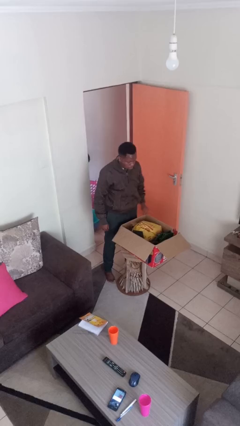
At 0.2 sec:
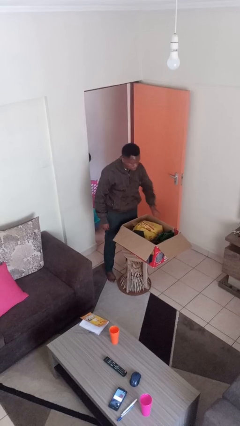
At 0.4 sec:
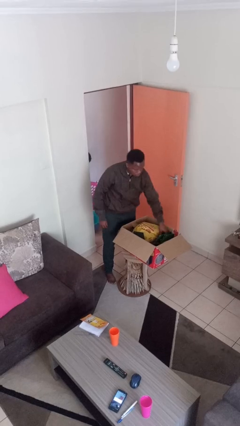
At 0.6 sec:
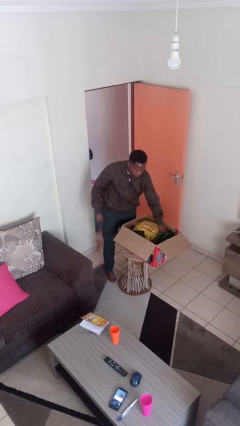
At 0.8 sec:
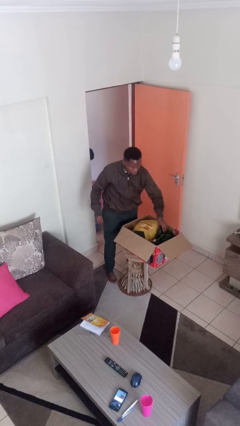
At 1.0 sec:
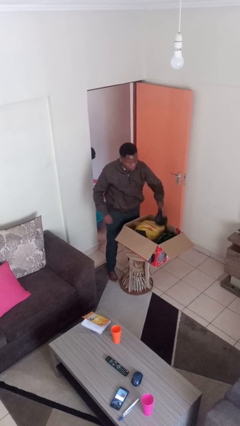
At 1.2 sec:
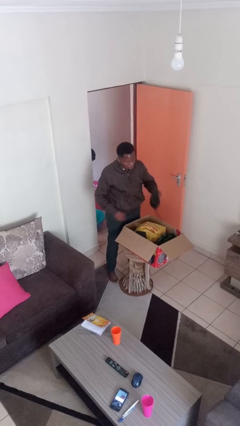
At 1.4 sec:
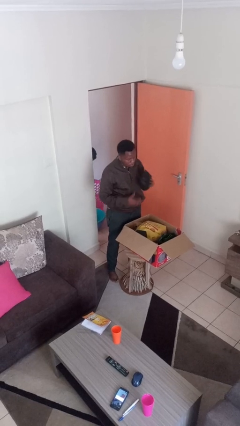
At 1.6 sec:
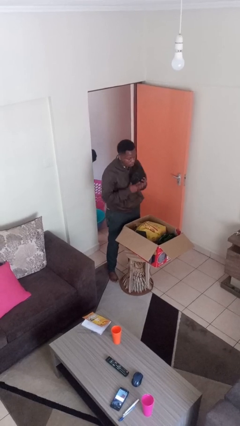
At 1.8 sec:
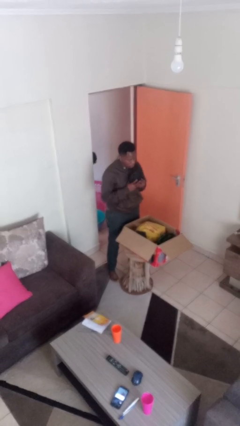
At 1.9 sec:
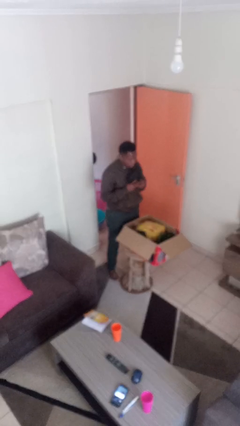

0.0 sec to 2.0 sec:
person takes object from box

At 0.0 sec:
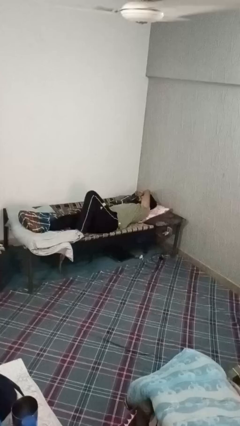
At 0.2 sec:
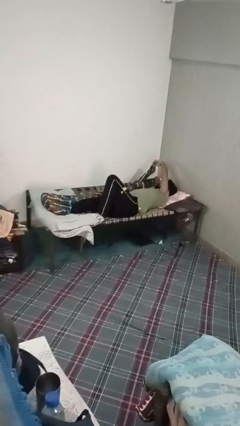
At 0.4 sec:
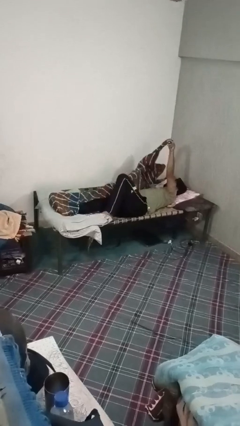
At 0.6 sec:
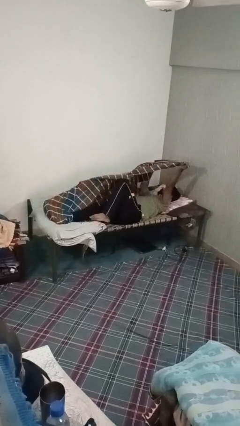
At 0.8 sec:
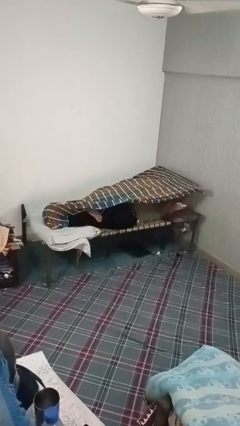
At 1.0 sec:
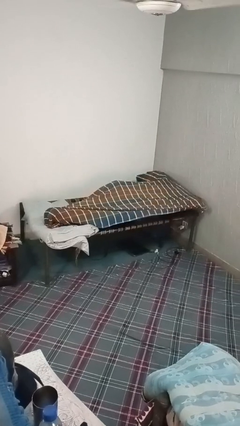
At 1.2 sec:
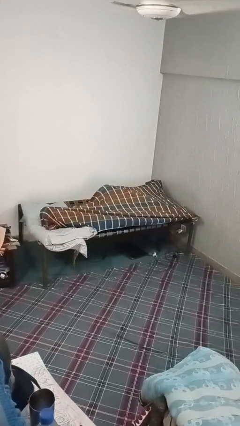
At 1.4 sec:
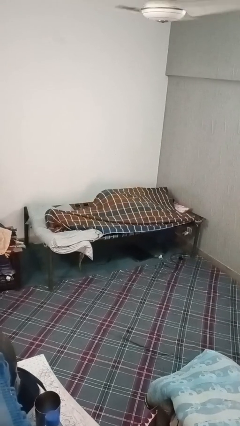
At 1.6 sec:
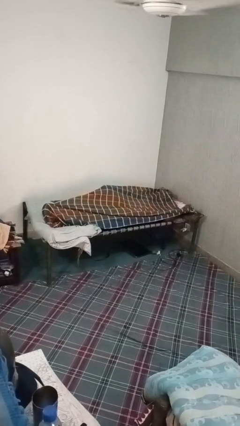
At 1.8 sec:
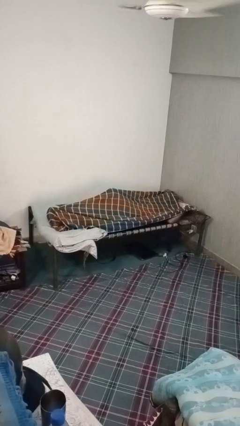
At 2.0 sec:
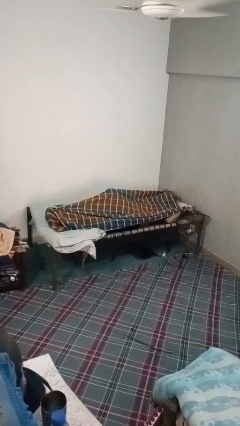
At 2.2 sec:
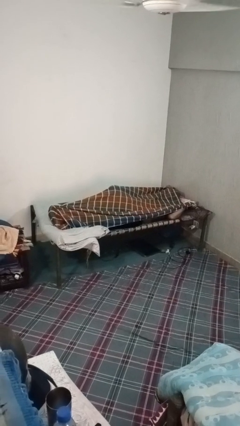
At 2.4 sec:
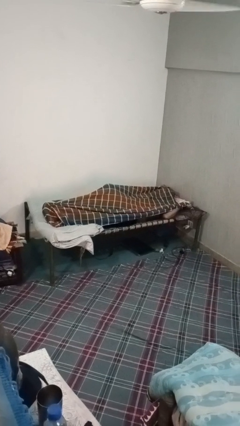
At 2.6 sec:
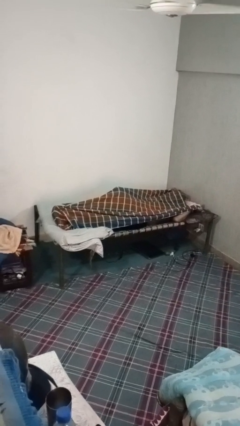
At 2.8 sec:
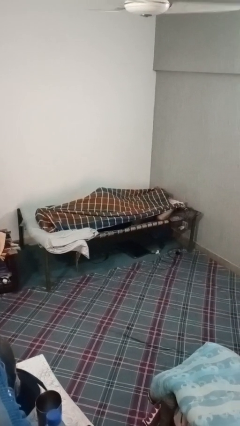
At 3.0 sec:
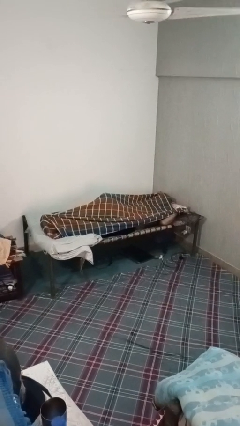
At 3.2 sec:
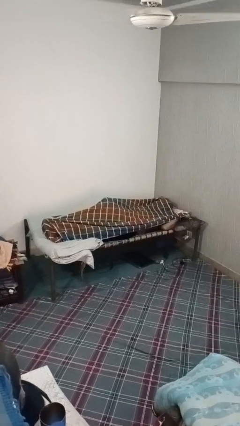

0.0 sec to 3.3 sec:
person covers with bedsheets

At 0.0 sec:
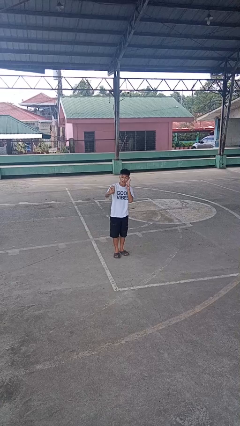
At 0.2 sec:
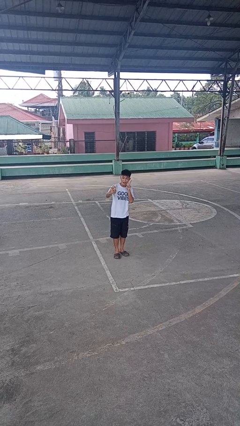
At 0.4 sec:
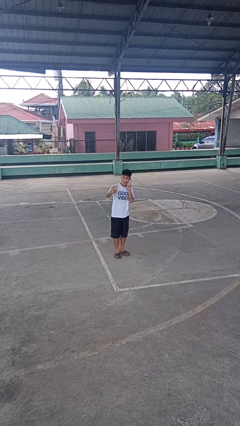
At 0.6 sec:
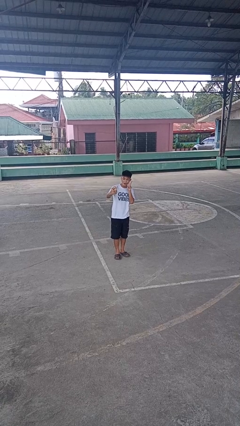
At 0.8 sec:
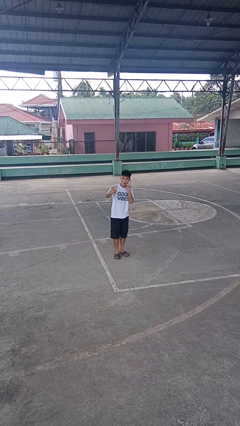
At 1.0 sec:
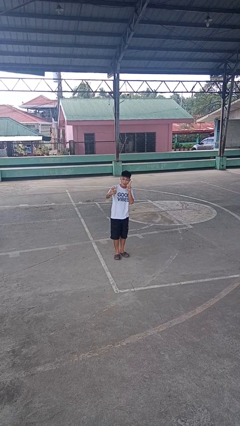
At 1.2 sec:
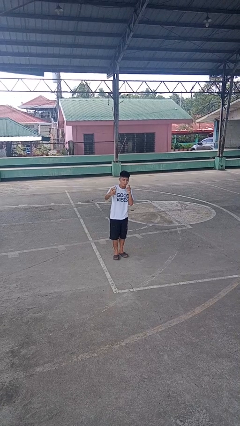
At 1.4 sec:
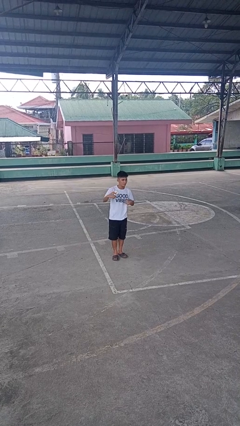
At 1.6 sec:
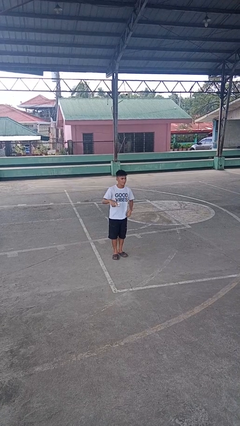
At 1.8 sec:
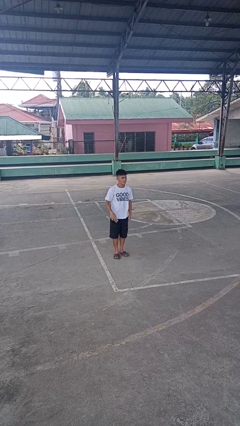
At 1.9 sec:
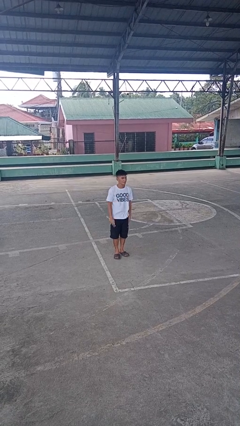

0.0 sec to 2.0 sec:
person takes selfie

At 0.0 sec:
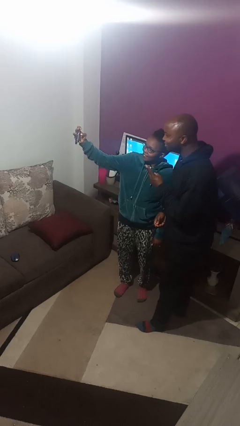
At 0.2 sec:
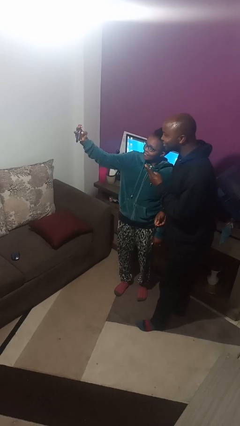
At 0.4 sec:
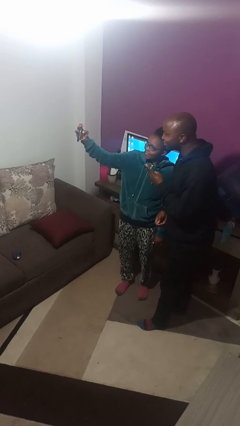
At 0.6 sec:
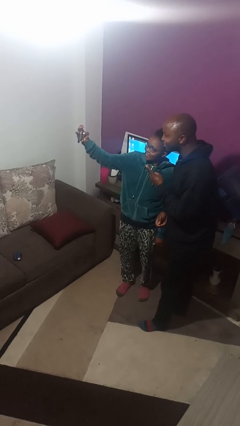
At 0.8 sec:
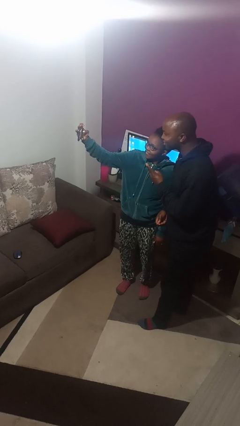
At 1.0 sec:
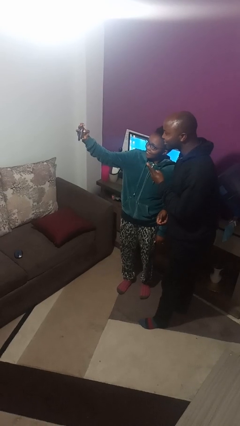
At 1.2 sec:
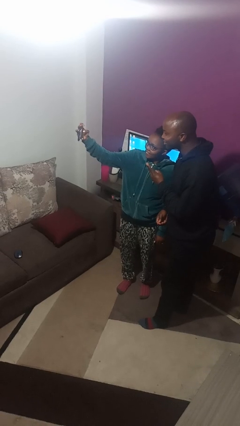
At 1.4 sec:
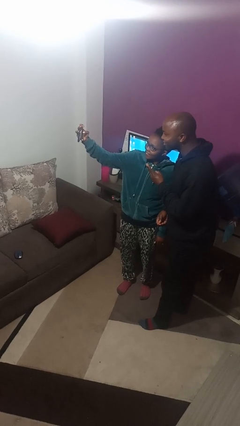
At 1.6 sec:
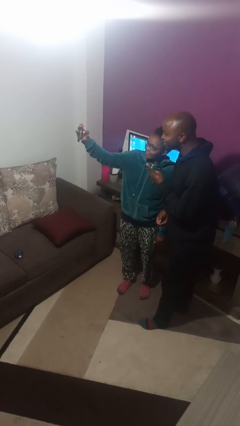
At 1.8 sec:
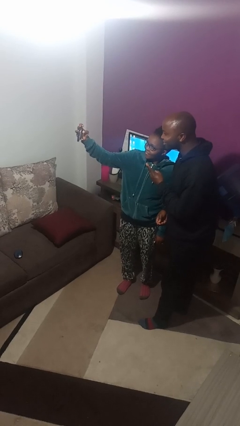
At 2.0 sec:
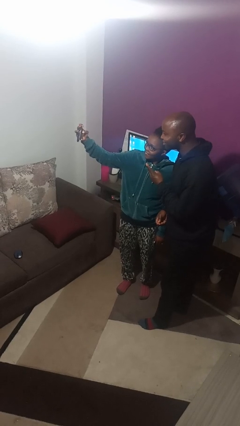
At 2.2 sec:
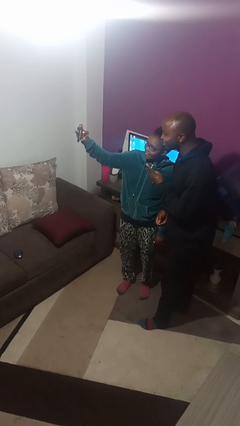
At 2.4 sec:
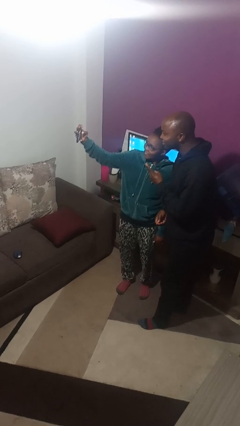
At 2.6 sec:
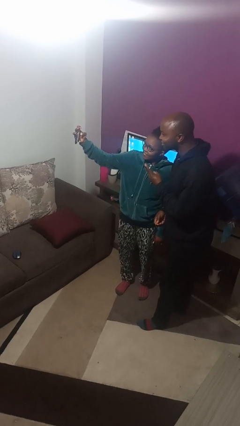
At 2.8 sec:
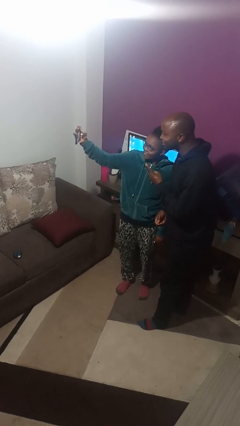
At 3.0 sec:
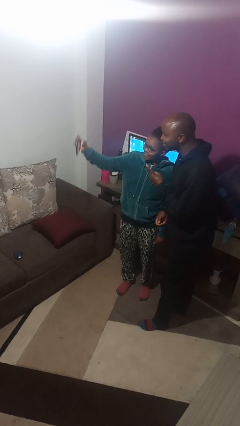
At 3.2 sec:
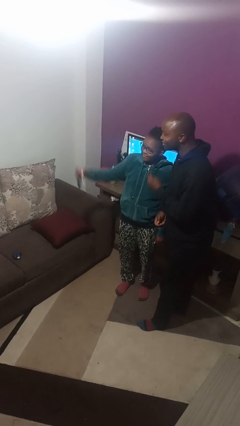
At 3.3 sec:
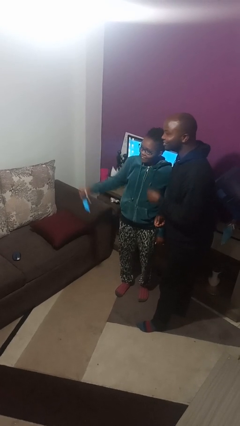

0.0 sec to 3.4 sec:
person takes selfie with person

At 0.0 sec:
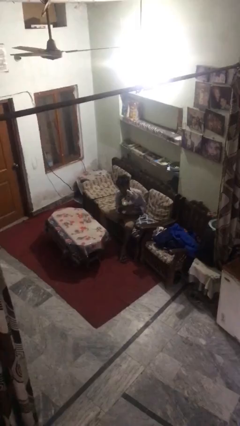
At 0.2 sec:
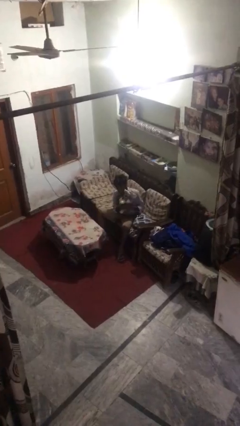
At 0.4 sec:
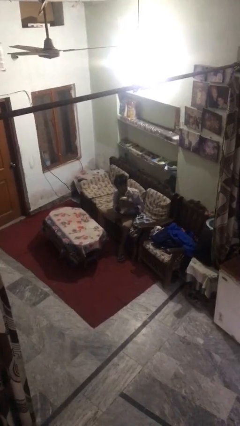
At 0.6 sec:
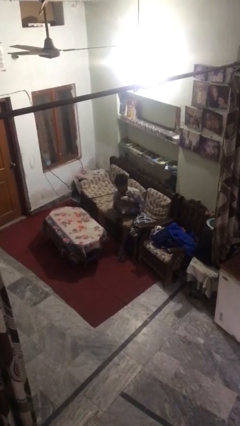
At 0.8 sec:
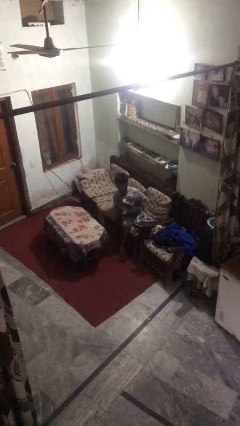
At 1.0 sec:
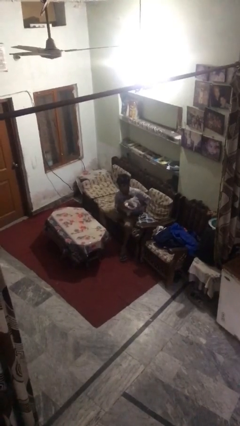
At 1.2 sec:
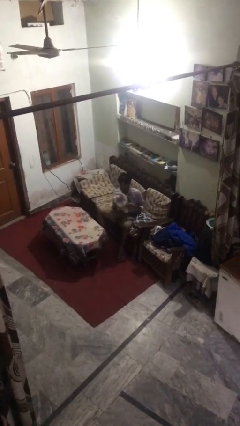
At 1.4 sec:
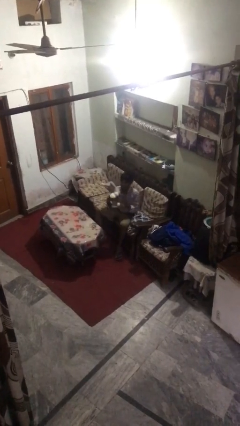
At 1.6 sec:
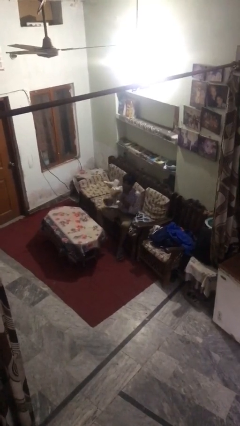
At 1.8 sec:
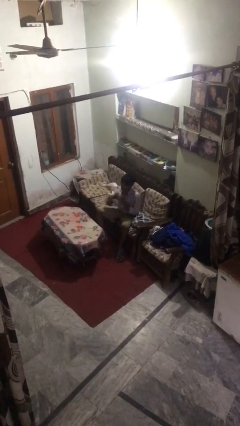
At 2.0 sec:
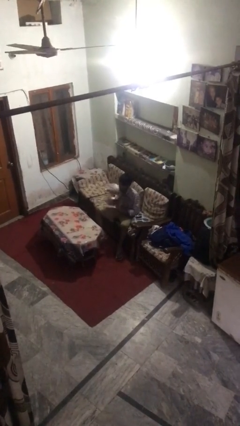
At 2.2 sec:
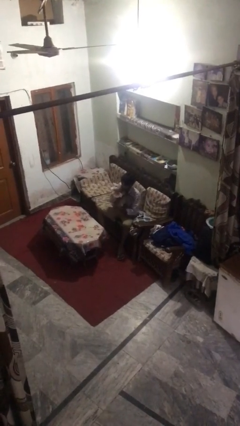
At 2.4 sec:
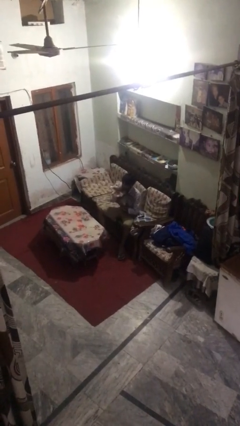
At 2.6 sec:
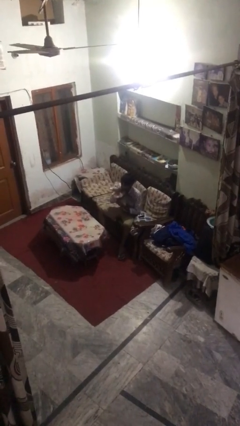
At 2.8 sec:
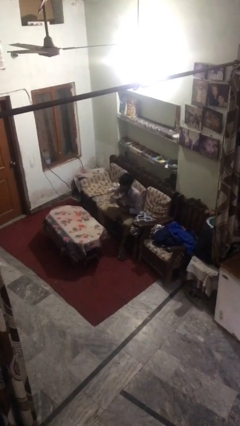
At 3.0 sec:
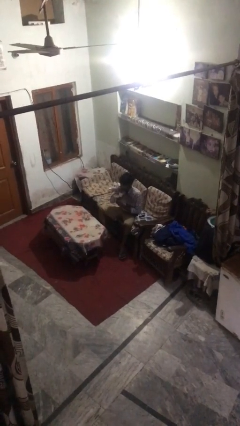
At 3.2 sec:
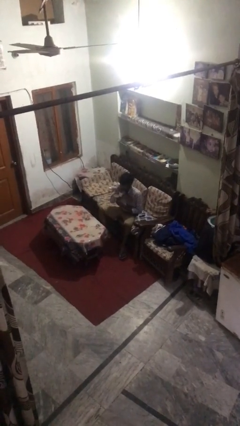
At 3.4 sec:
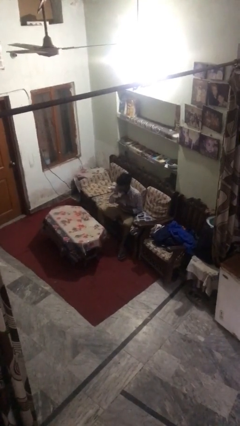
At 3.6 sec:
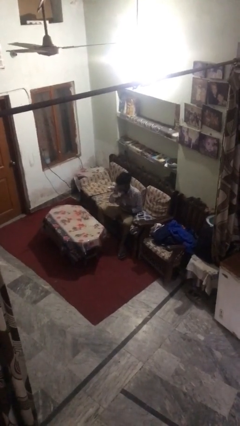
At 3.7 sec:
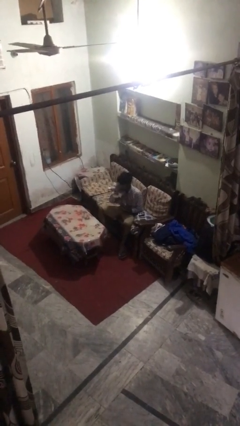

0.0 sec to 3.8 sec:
person hugs stuffed animal

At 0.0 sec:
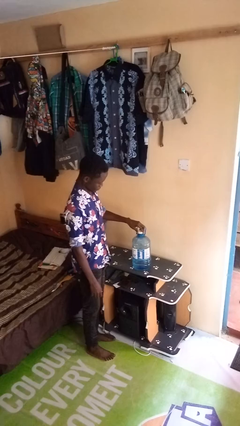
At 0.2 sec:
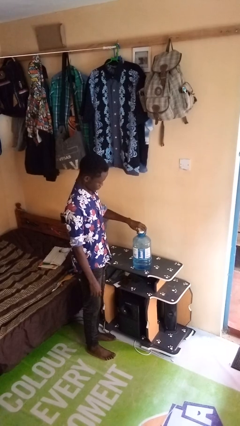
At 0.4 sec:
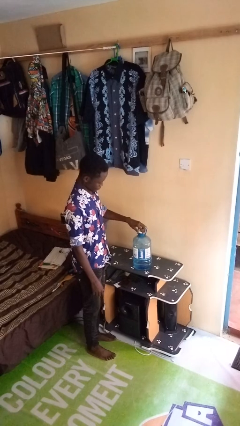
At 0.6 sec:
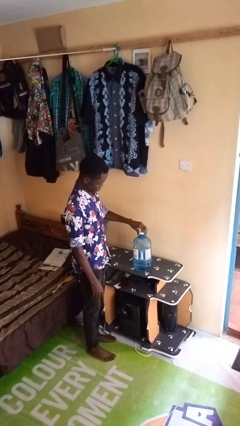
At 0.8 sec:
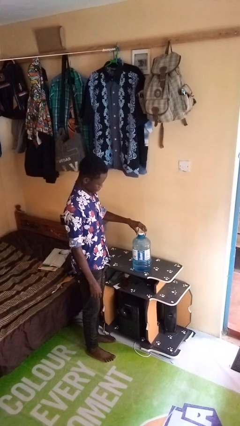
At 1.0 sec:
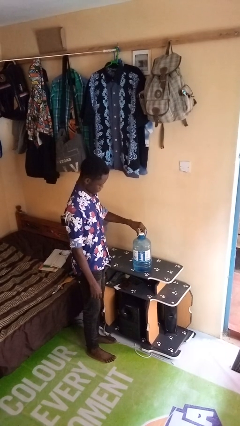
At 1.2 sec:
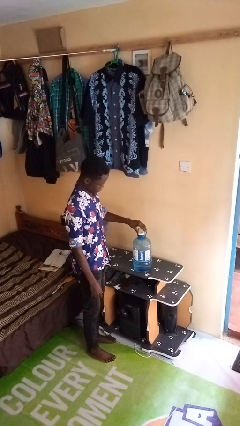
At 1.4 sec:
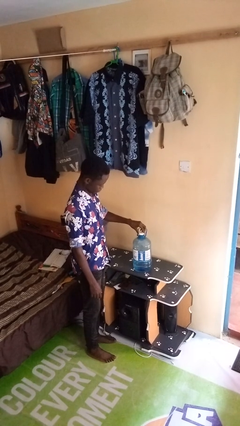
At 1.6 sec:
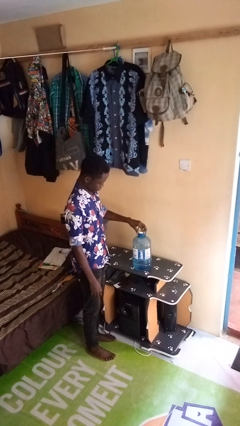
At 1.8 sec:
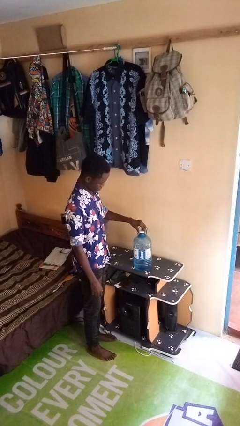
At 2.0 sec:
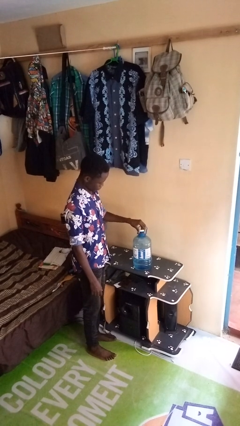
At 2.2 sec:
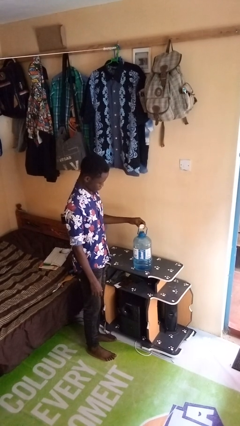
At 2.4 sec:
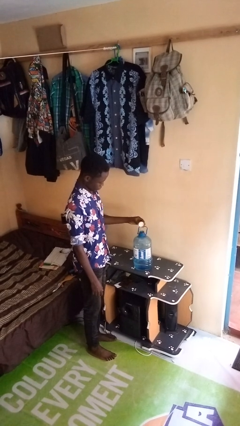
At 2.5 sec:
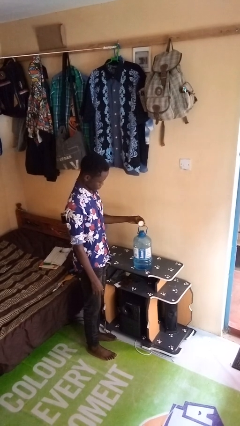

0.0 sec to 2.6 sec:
person unscrews lid from bottle
